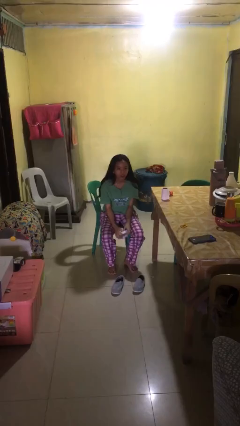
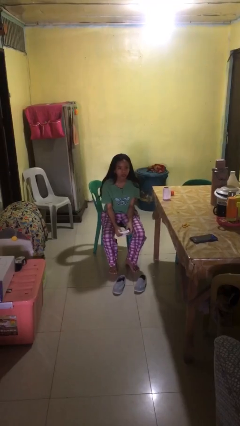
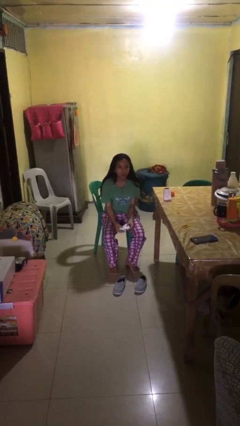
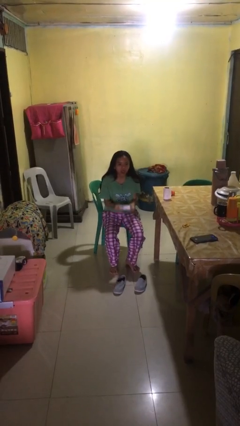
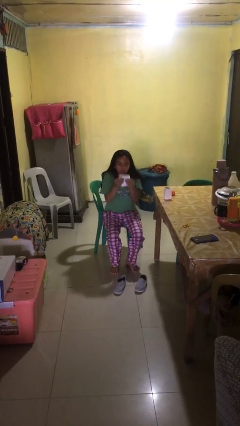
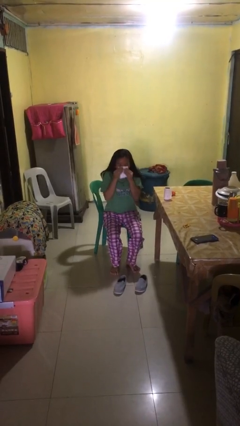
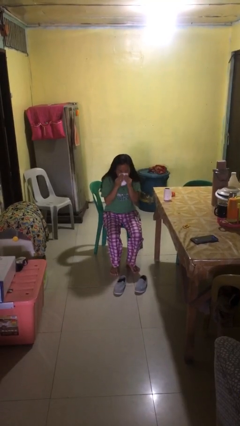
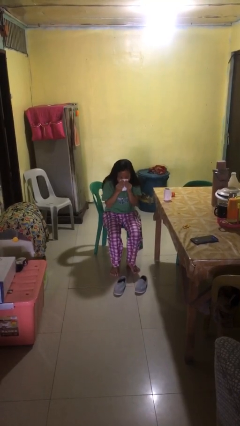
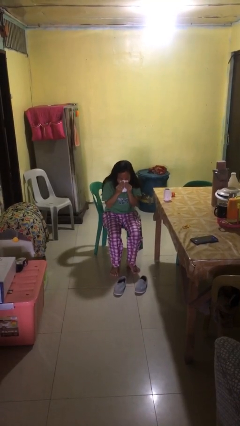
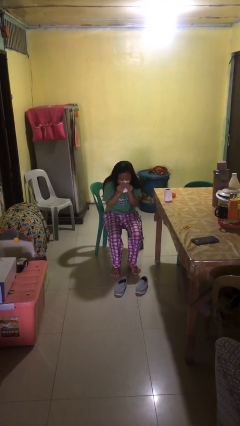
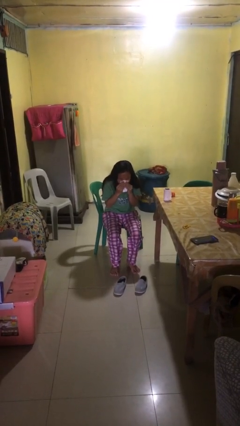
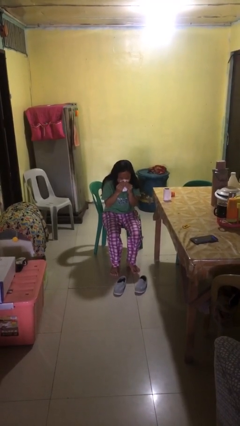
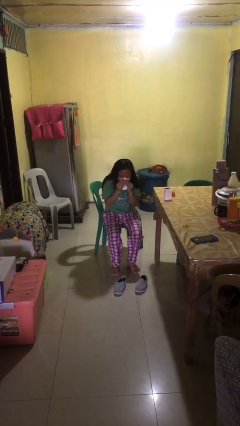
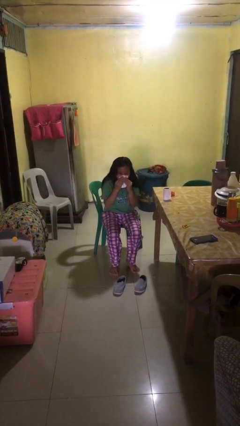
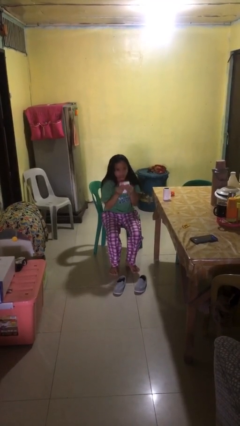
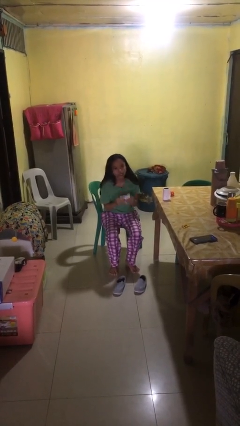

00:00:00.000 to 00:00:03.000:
person blows nose

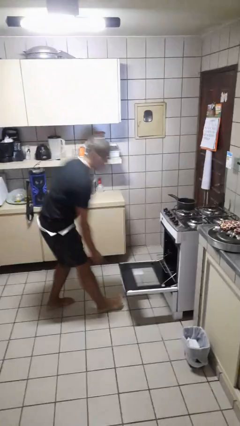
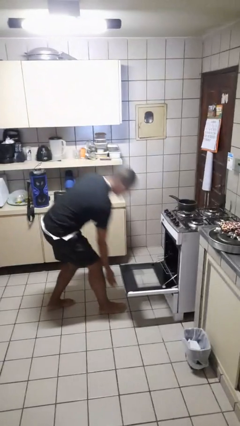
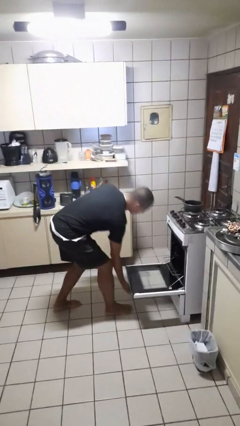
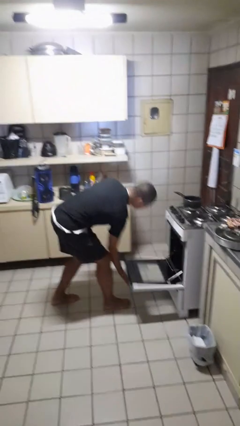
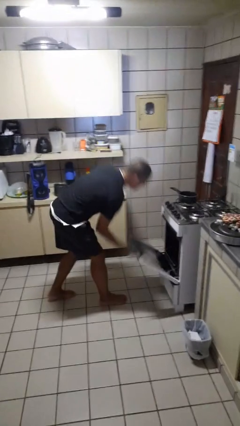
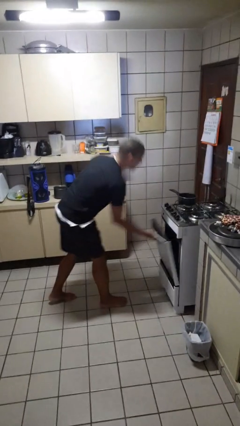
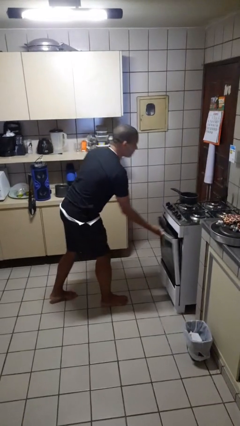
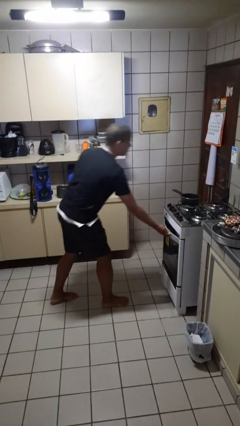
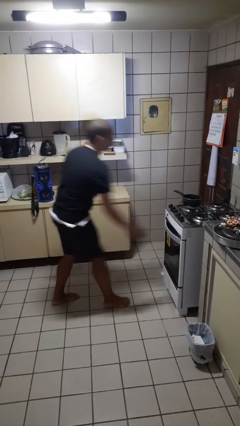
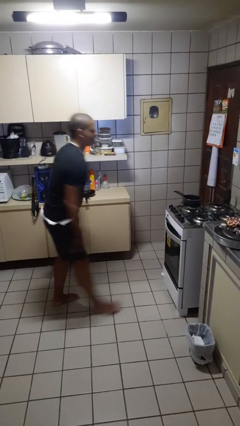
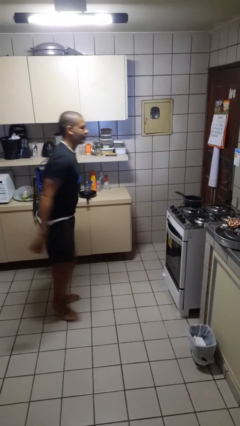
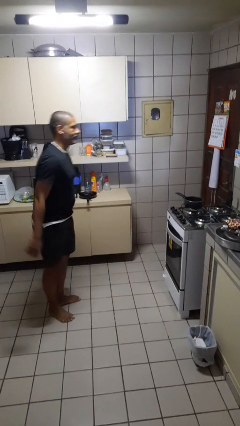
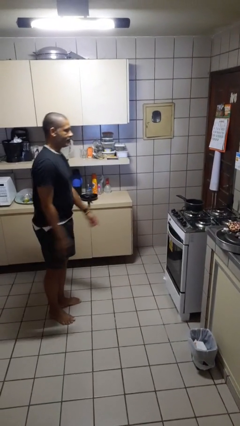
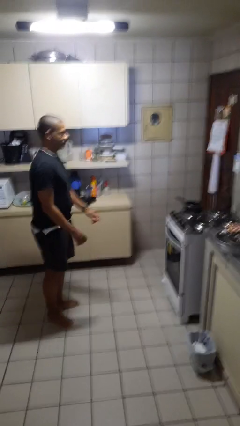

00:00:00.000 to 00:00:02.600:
person closes oven door

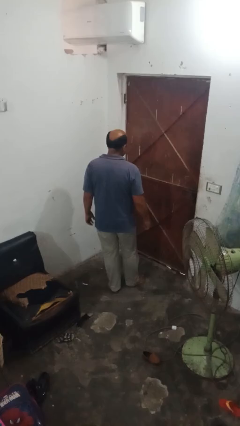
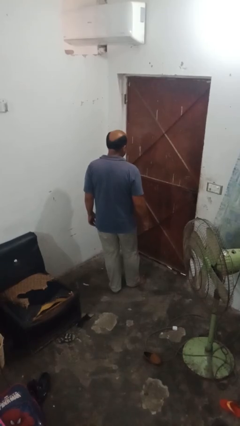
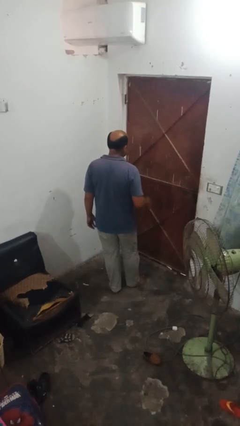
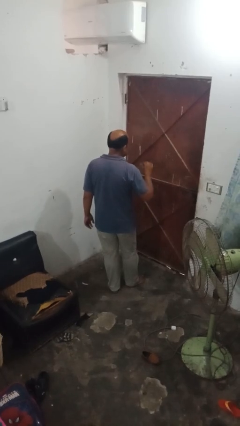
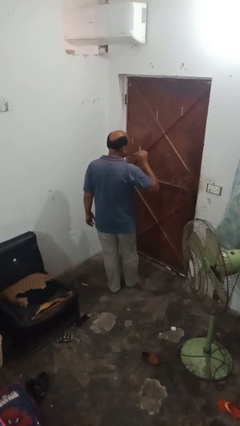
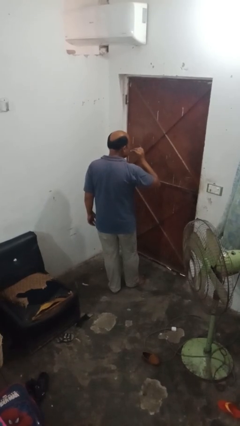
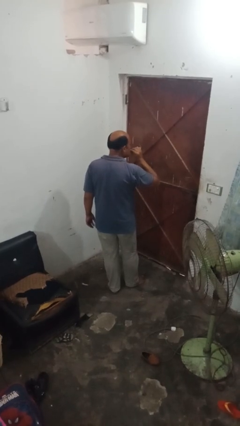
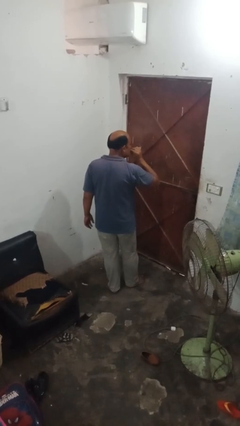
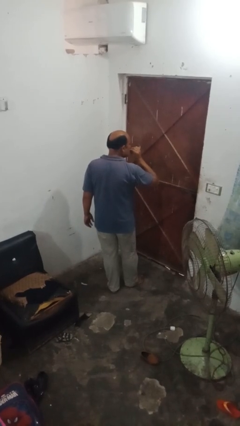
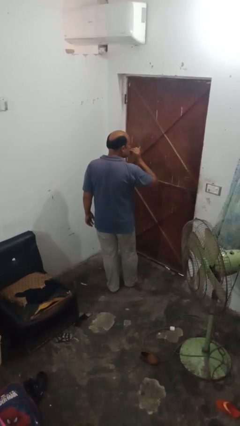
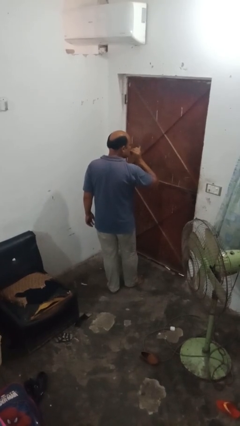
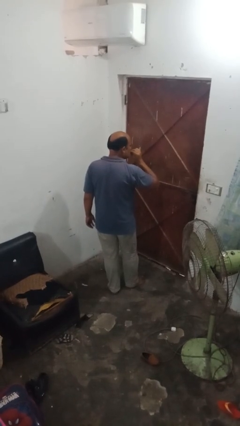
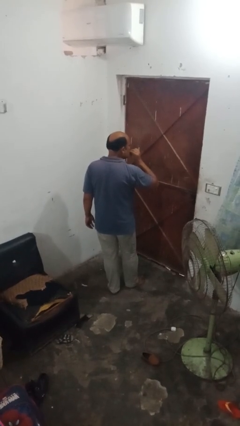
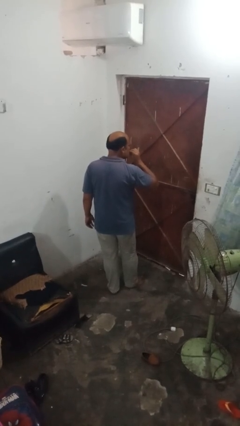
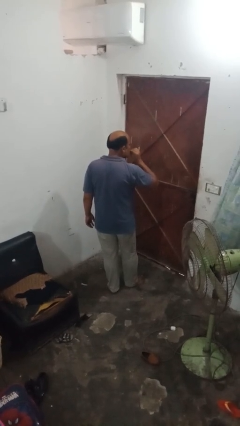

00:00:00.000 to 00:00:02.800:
person flosses

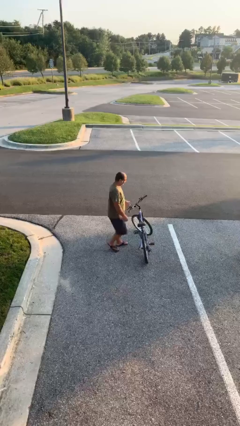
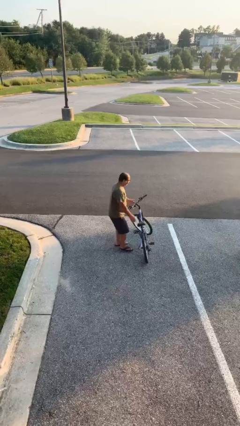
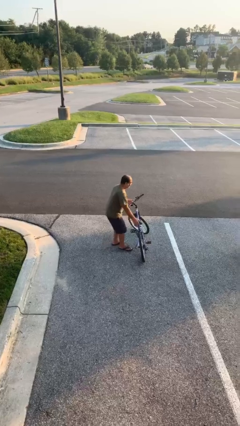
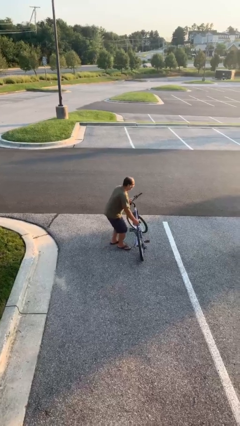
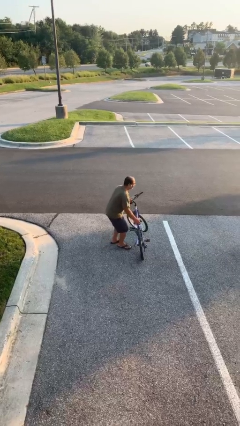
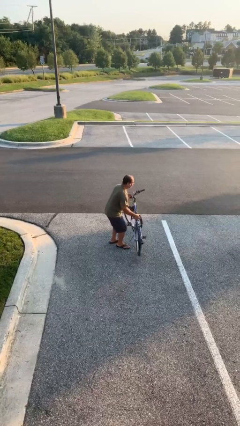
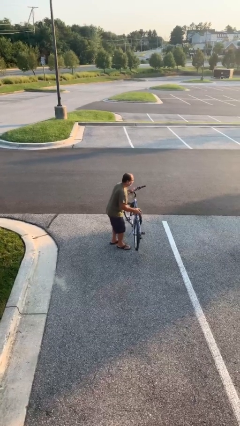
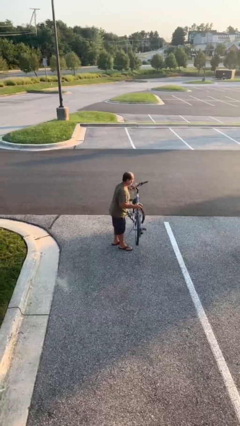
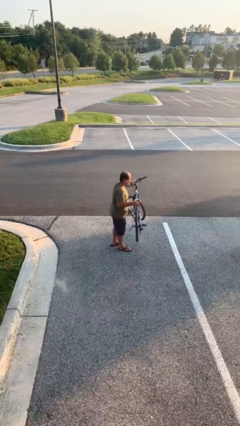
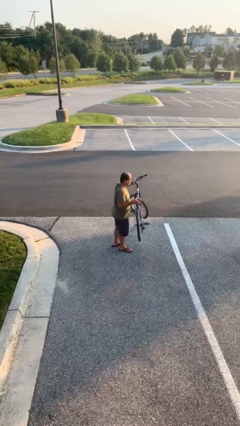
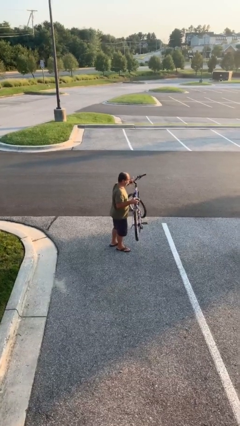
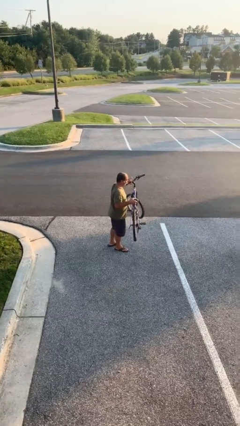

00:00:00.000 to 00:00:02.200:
person picks up object from floor

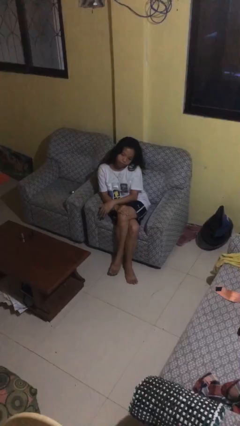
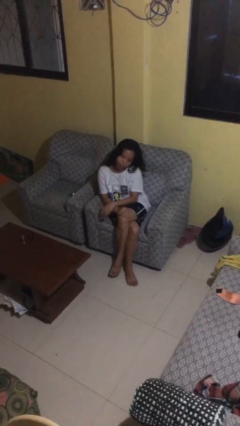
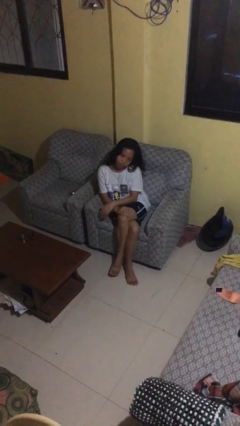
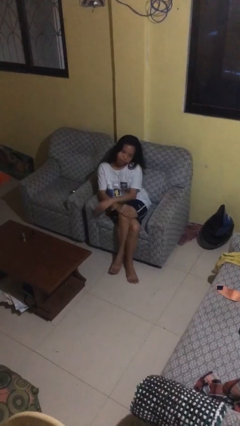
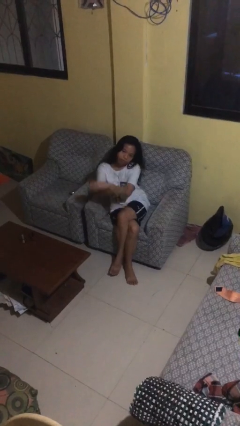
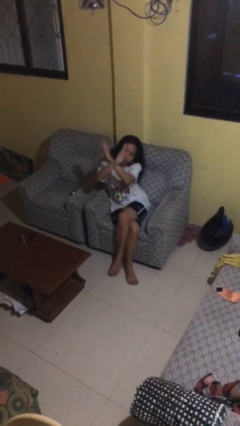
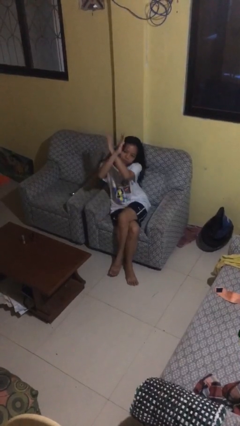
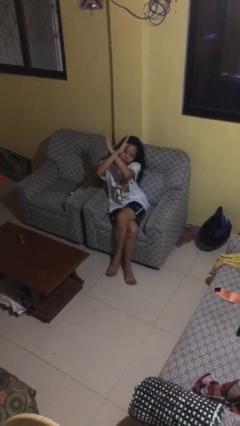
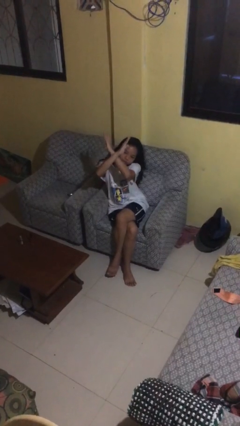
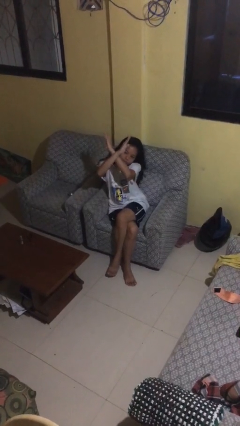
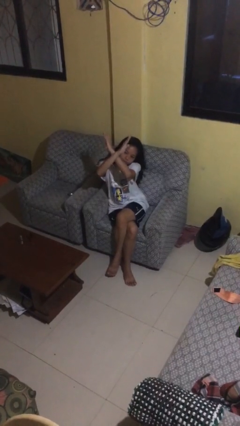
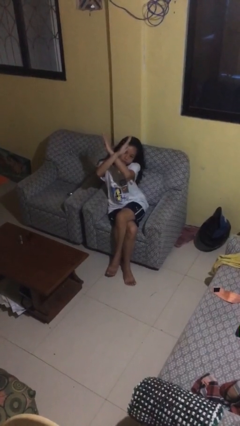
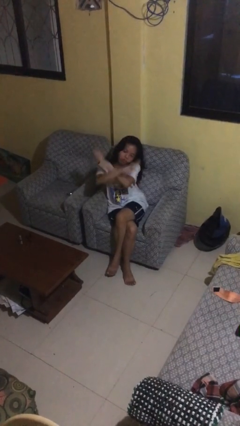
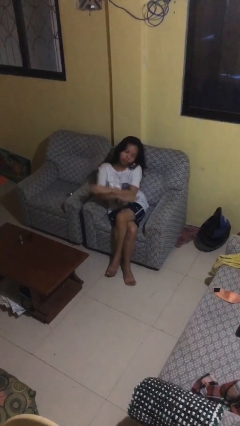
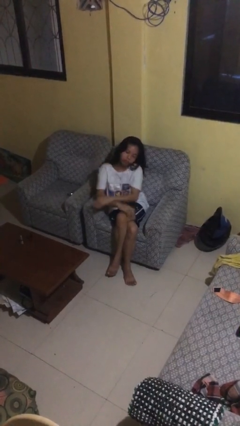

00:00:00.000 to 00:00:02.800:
person gestures arms x

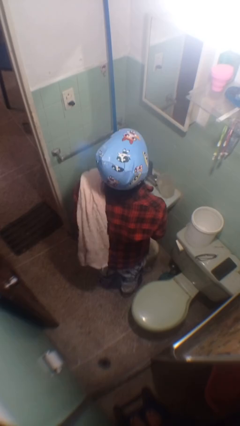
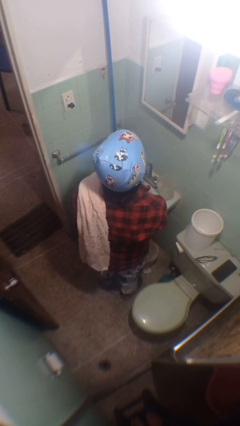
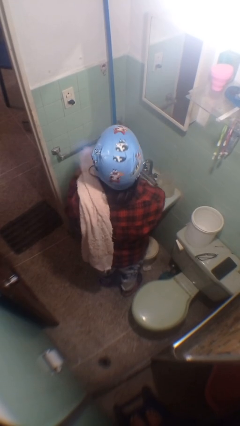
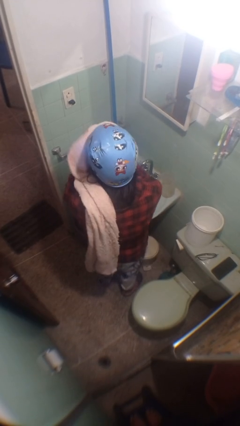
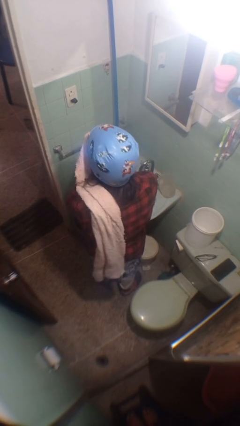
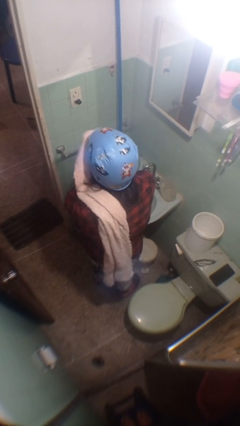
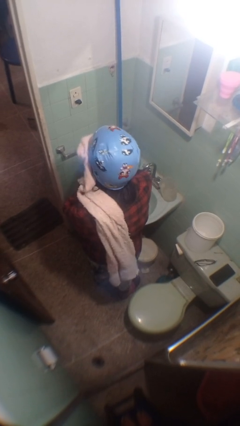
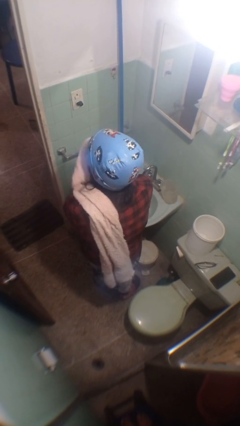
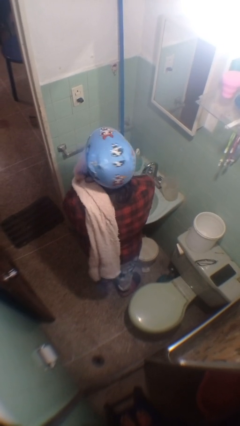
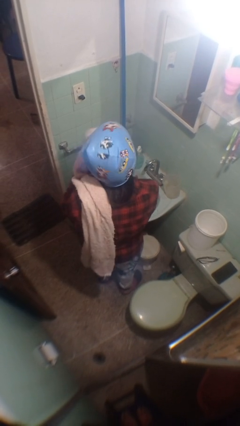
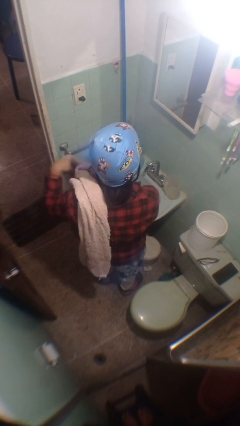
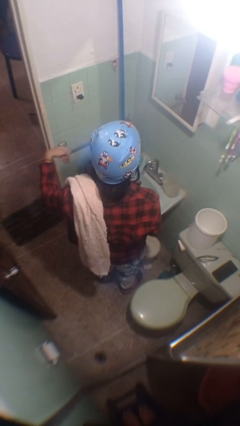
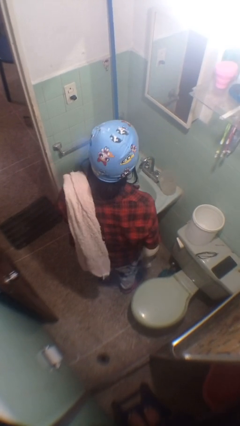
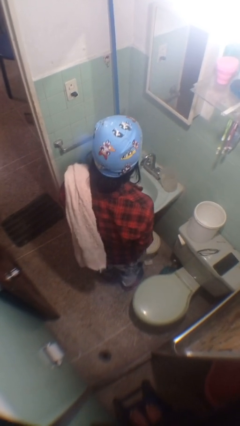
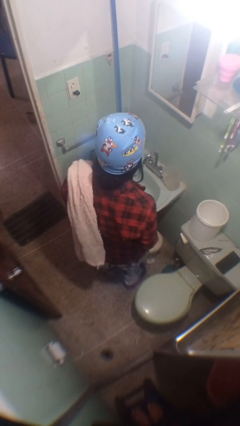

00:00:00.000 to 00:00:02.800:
person dries face with towel

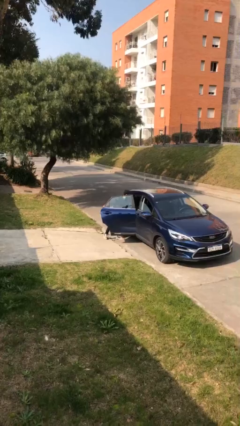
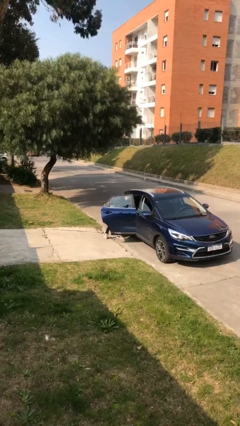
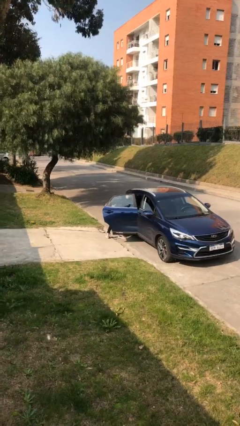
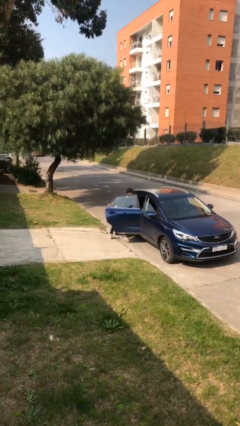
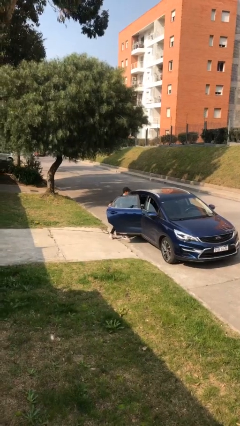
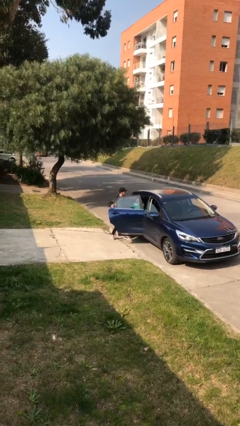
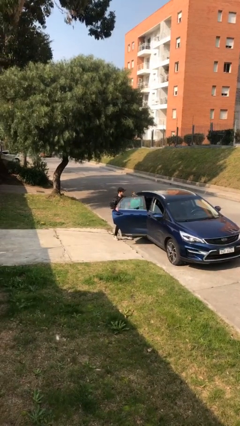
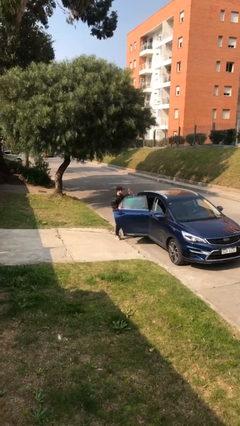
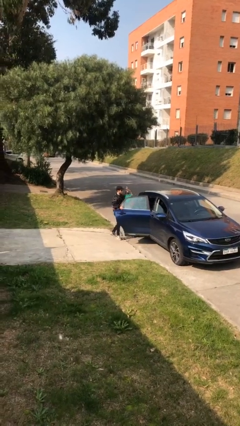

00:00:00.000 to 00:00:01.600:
person unloads car
